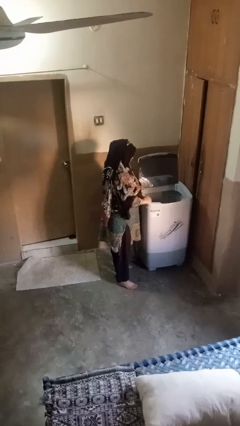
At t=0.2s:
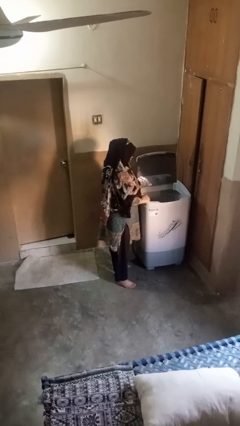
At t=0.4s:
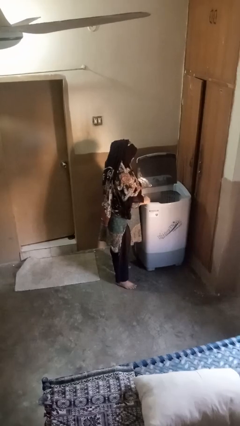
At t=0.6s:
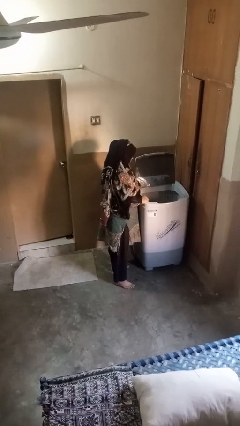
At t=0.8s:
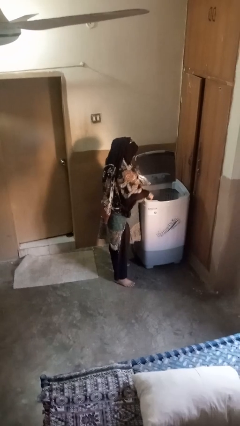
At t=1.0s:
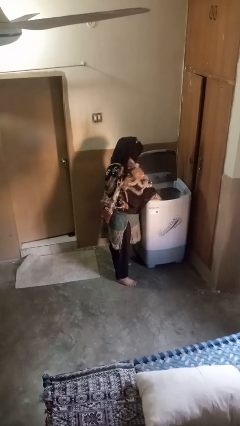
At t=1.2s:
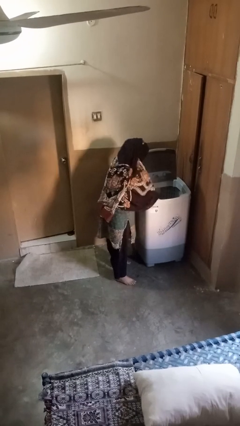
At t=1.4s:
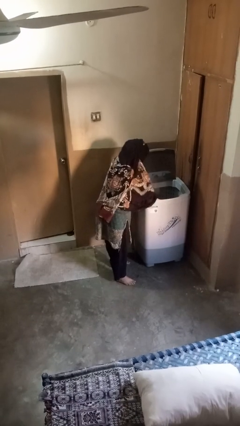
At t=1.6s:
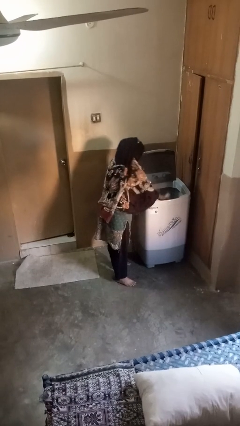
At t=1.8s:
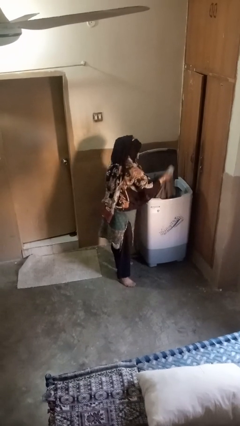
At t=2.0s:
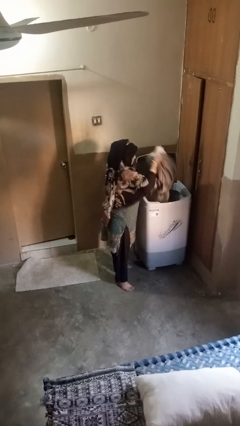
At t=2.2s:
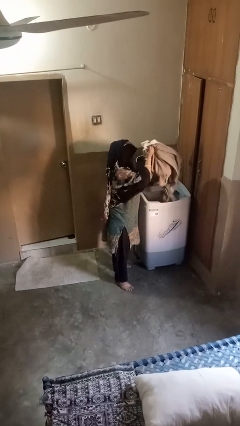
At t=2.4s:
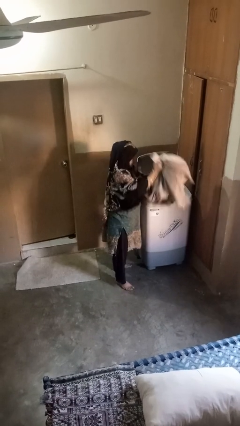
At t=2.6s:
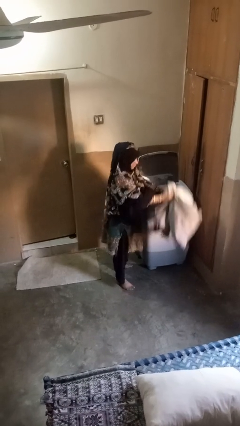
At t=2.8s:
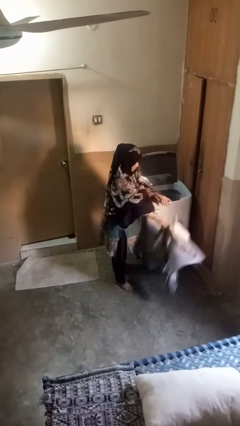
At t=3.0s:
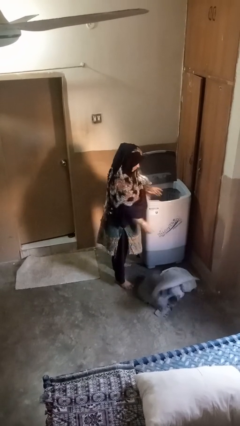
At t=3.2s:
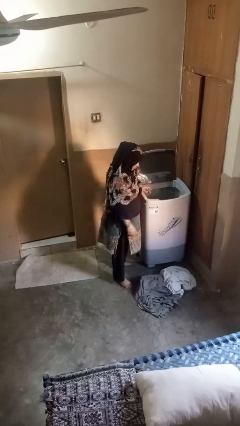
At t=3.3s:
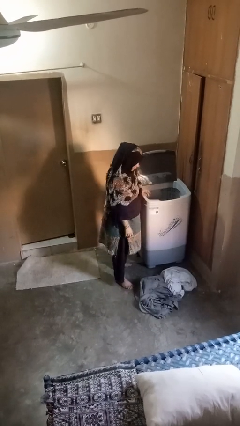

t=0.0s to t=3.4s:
person unloads clotheswasher

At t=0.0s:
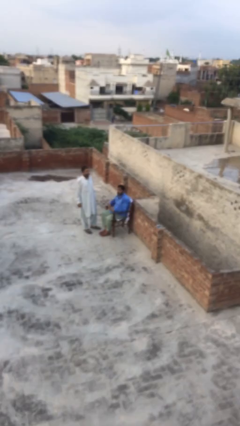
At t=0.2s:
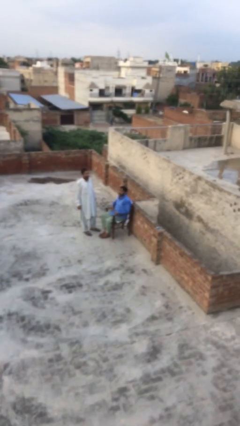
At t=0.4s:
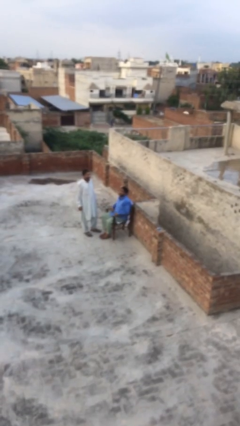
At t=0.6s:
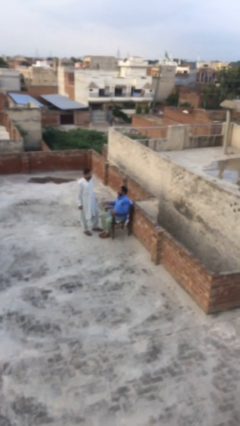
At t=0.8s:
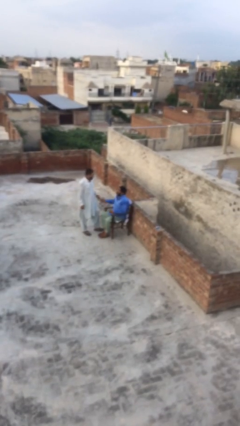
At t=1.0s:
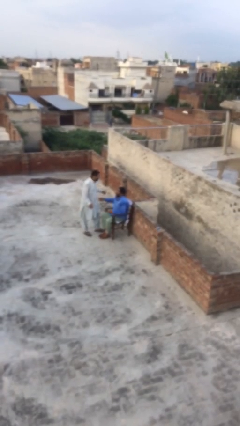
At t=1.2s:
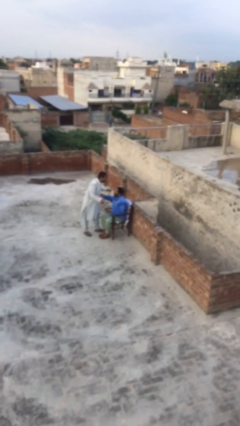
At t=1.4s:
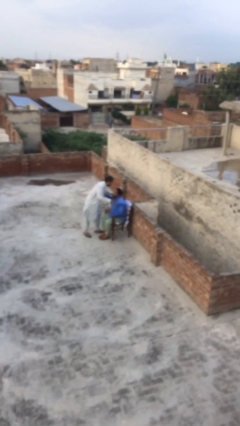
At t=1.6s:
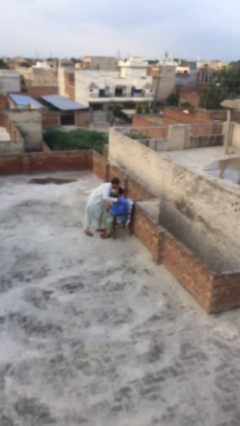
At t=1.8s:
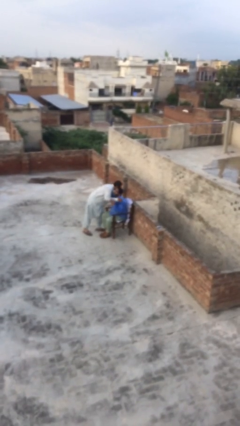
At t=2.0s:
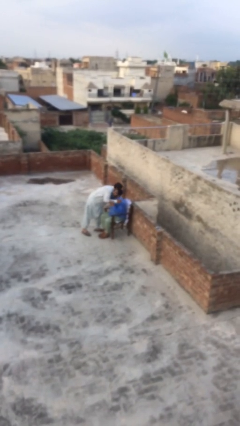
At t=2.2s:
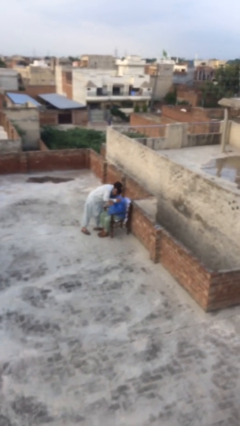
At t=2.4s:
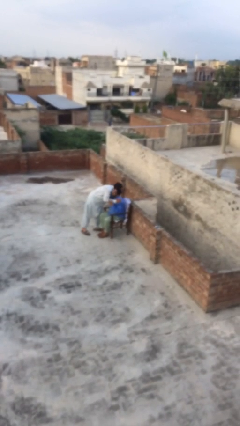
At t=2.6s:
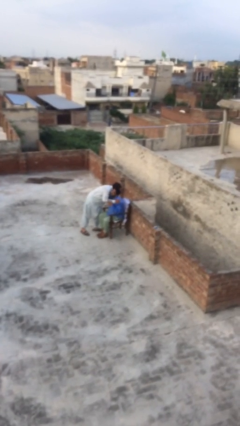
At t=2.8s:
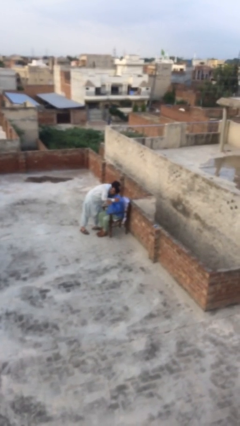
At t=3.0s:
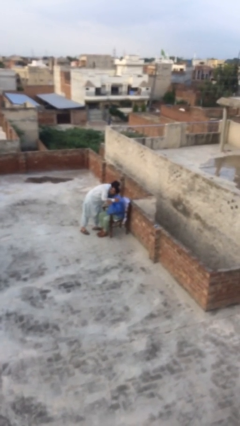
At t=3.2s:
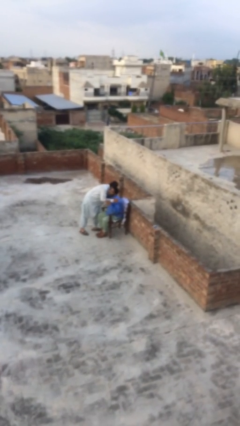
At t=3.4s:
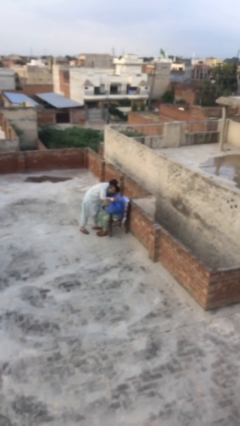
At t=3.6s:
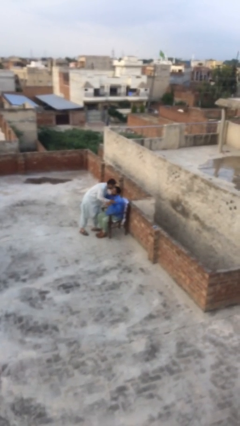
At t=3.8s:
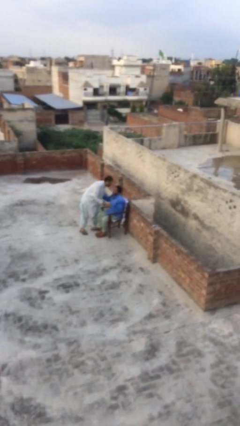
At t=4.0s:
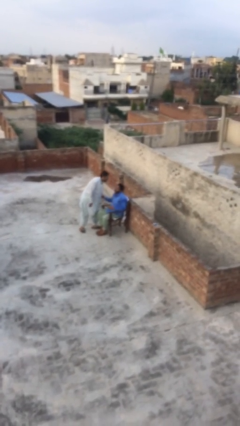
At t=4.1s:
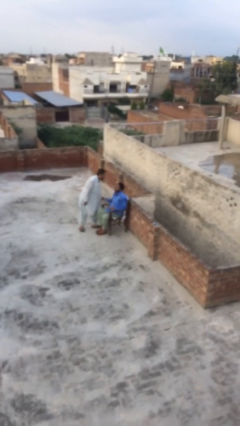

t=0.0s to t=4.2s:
person embraces person

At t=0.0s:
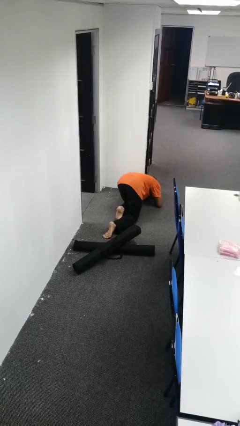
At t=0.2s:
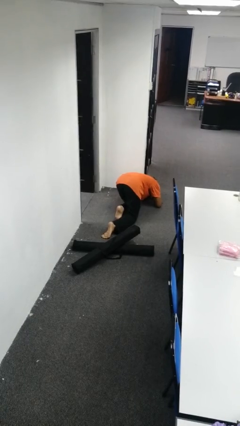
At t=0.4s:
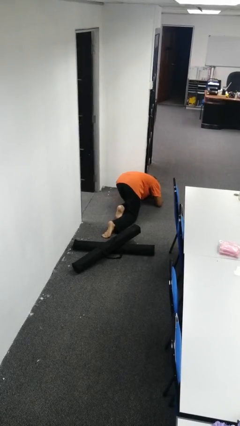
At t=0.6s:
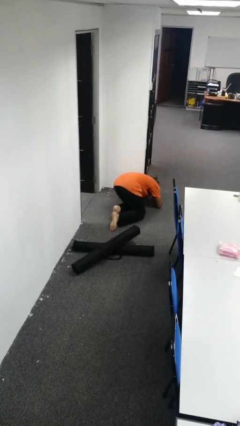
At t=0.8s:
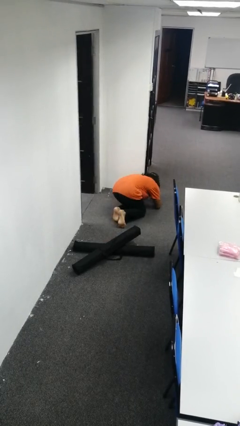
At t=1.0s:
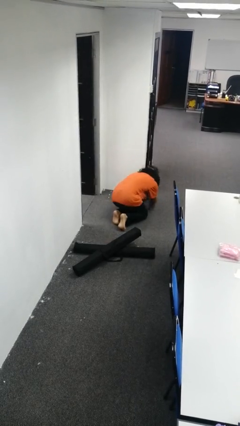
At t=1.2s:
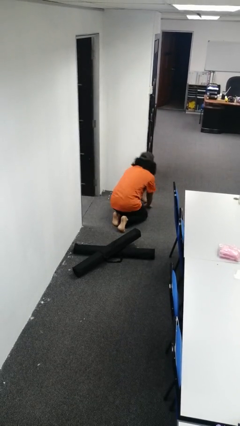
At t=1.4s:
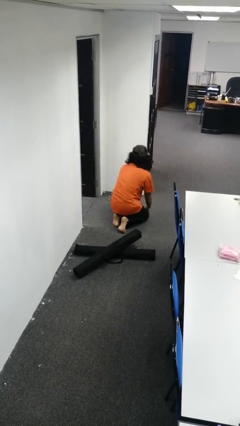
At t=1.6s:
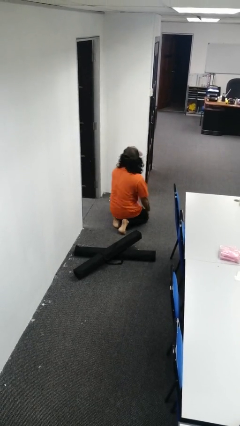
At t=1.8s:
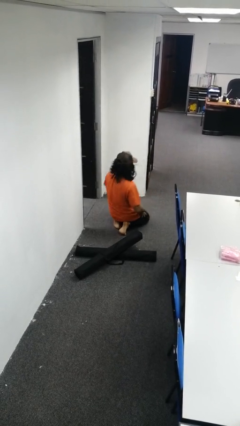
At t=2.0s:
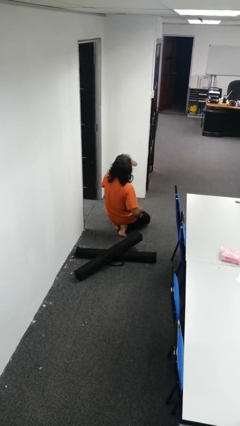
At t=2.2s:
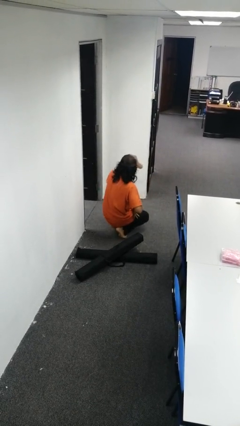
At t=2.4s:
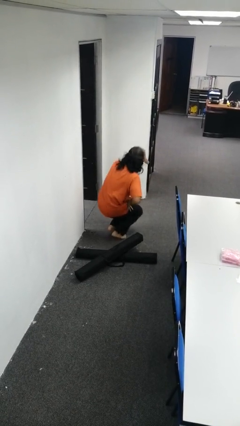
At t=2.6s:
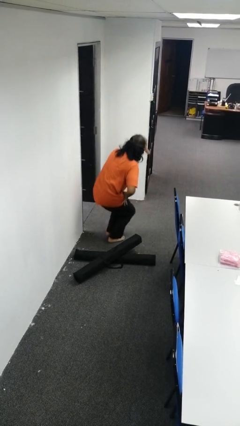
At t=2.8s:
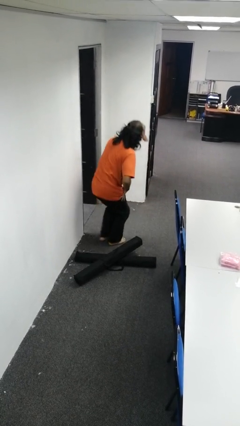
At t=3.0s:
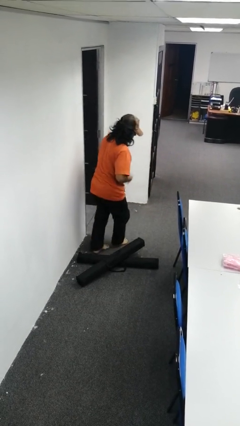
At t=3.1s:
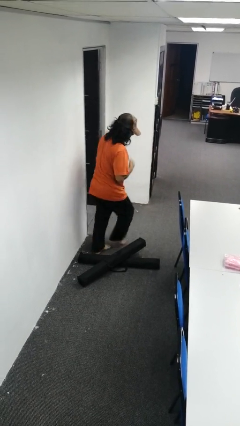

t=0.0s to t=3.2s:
person stands up from floor

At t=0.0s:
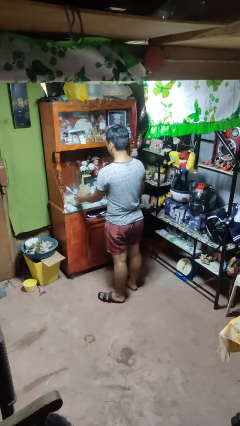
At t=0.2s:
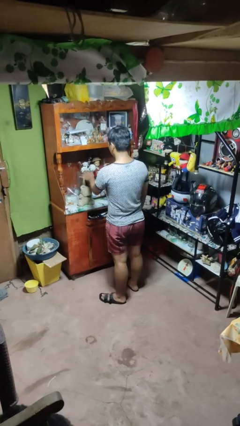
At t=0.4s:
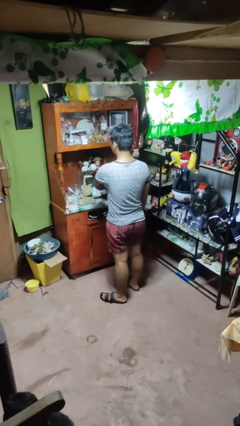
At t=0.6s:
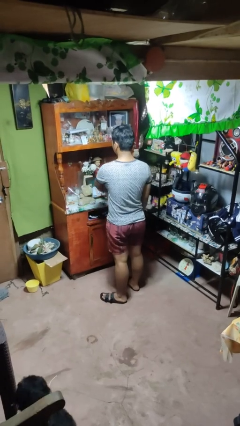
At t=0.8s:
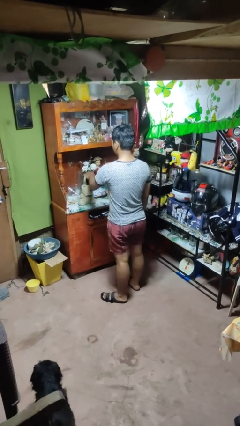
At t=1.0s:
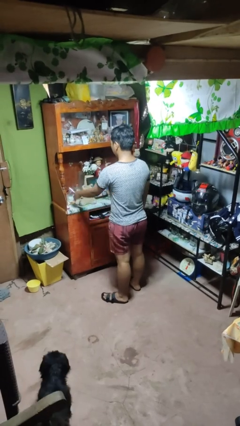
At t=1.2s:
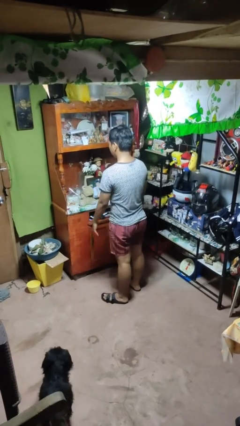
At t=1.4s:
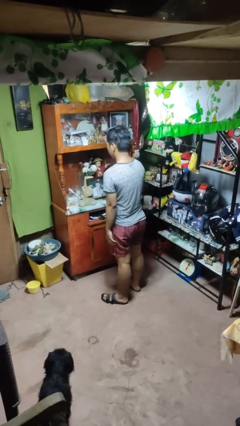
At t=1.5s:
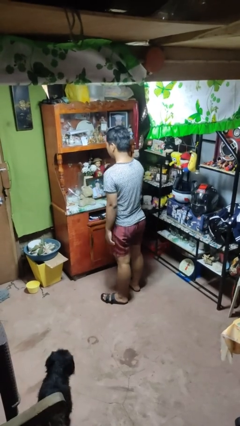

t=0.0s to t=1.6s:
person waves hand over object

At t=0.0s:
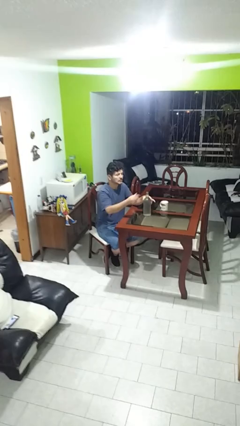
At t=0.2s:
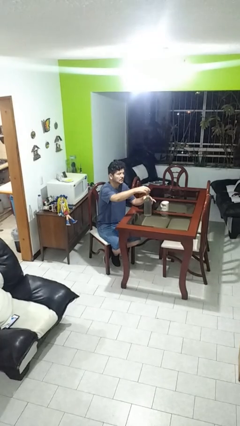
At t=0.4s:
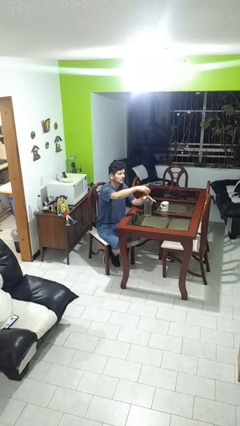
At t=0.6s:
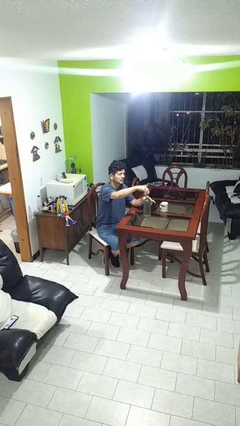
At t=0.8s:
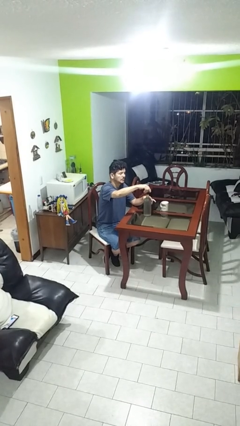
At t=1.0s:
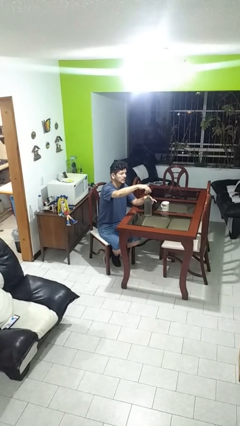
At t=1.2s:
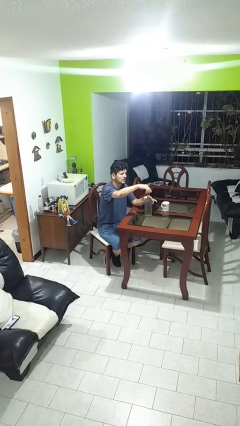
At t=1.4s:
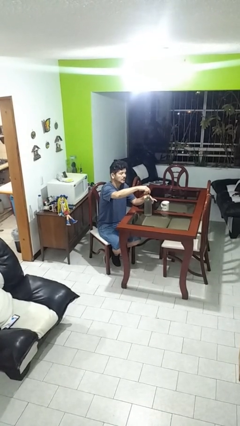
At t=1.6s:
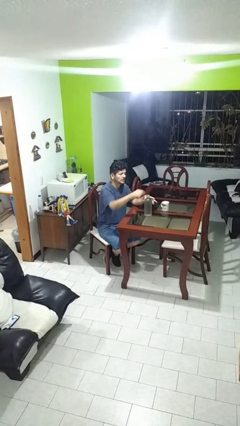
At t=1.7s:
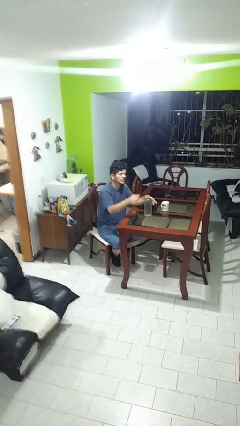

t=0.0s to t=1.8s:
person screws lid to bottle

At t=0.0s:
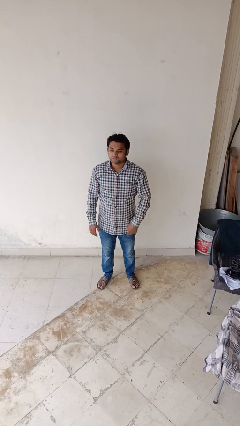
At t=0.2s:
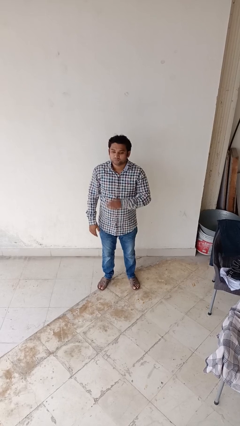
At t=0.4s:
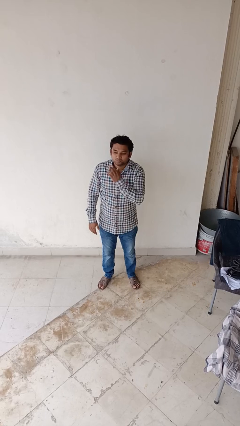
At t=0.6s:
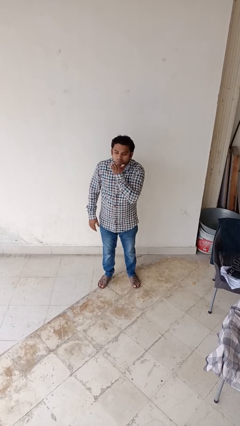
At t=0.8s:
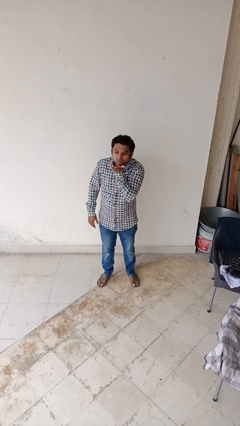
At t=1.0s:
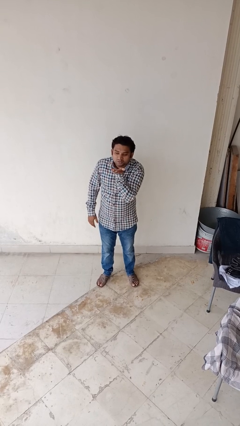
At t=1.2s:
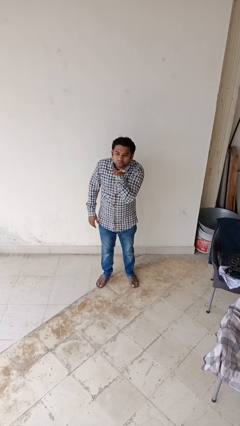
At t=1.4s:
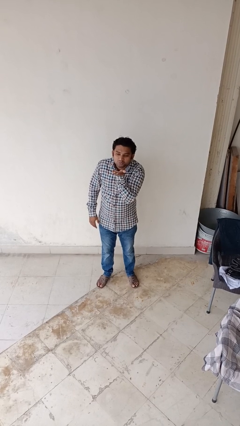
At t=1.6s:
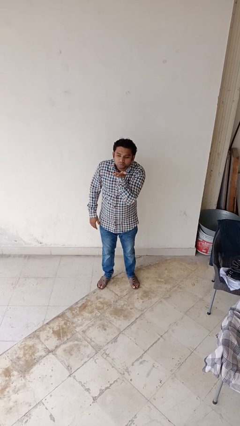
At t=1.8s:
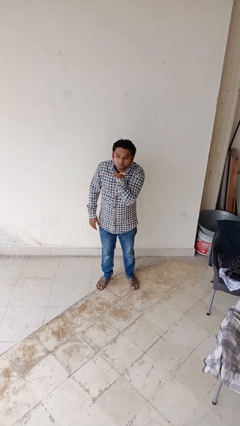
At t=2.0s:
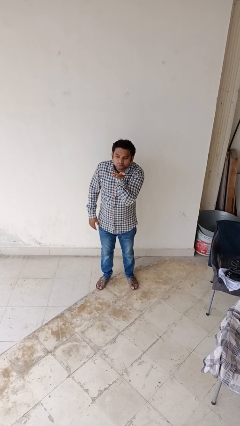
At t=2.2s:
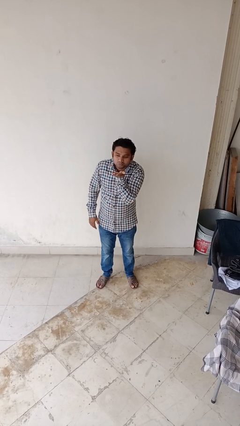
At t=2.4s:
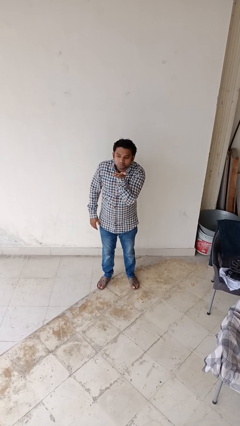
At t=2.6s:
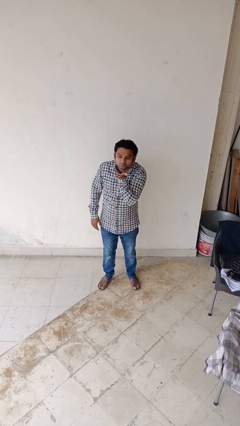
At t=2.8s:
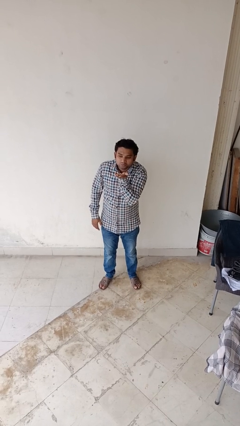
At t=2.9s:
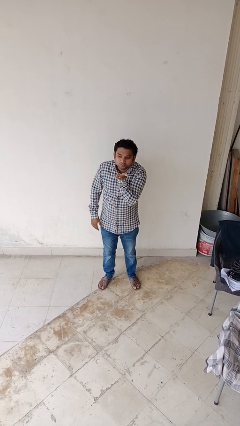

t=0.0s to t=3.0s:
person gestures blow kiss
